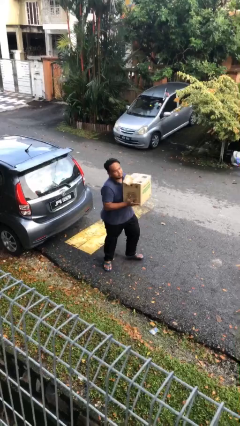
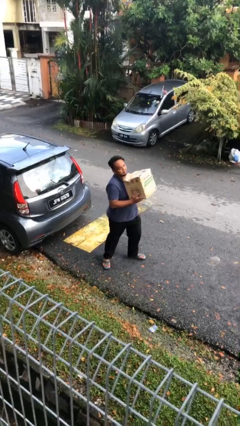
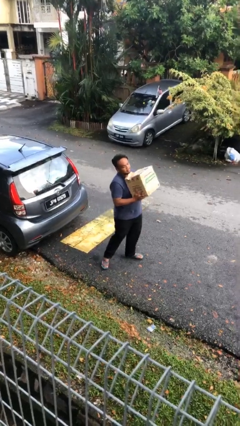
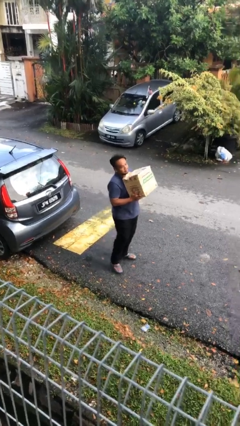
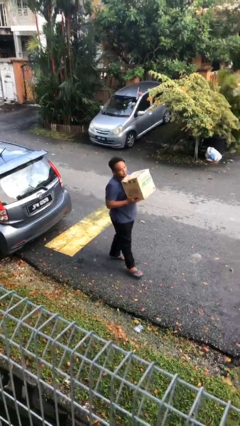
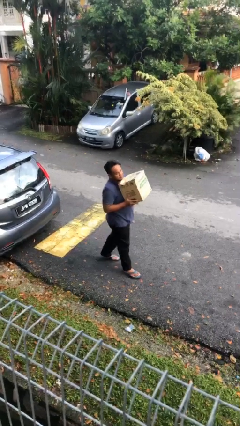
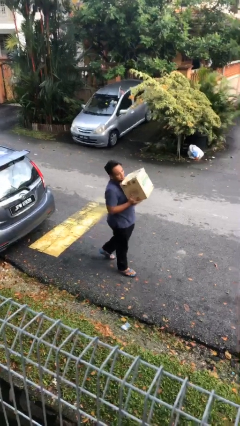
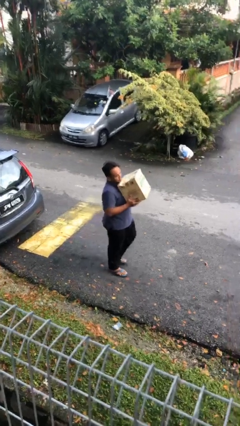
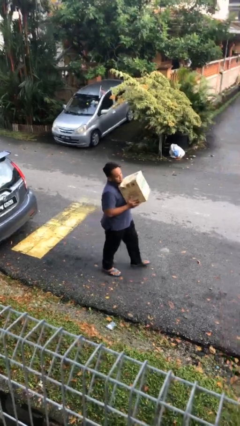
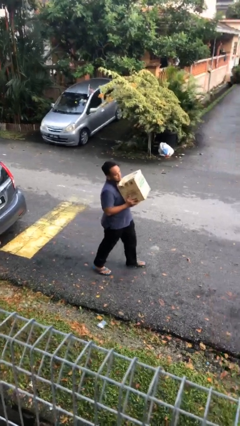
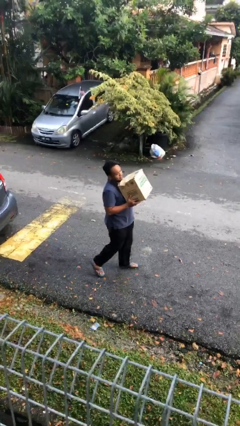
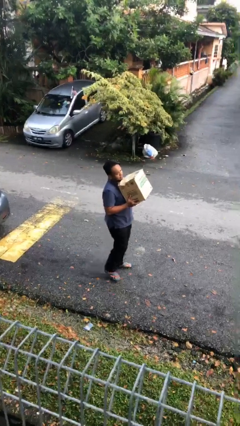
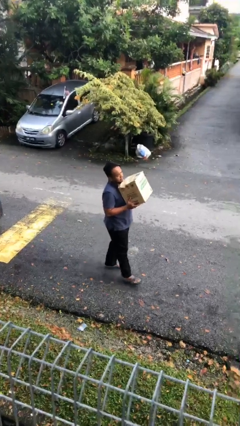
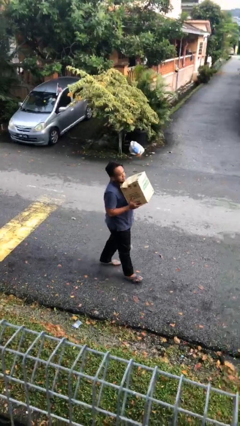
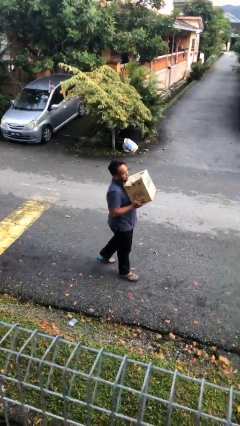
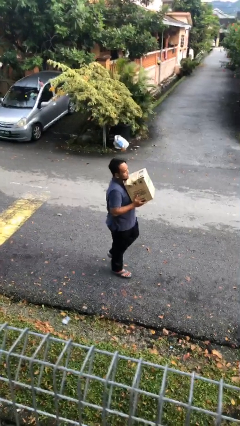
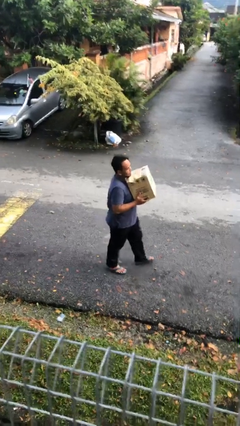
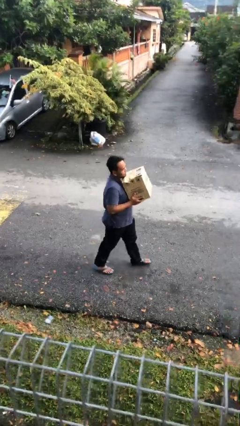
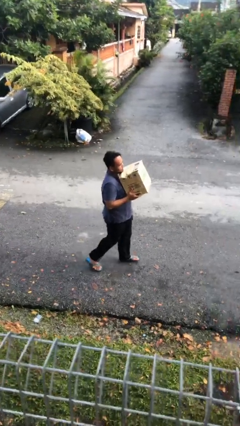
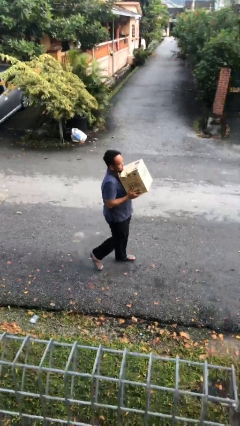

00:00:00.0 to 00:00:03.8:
person carries heavy object

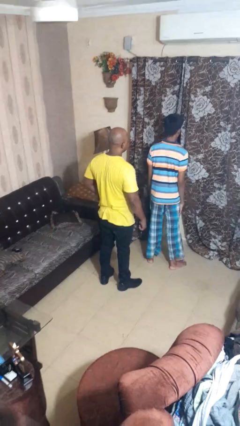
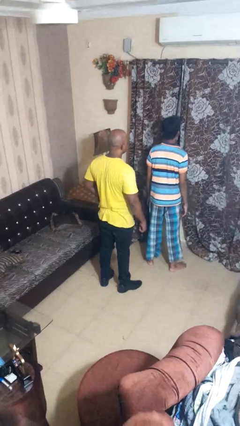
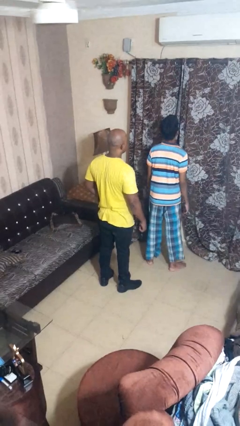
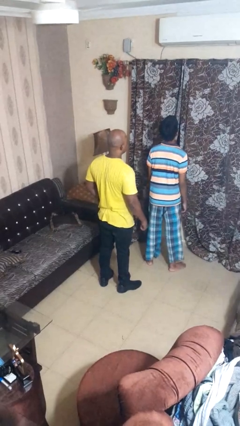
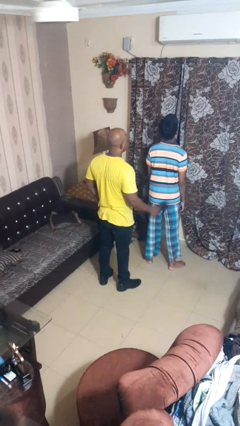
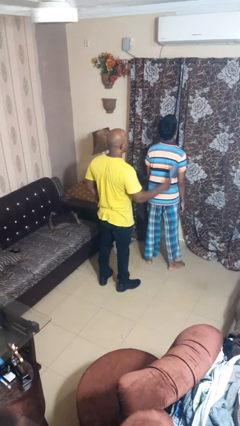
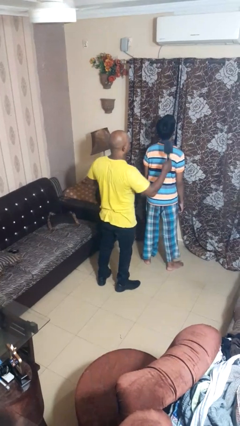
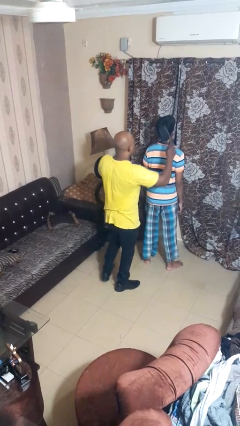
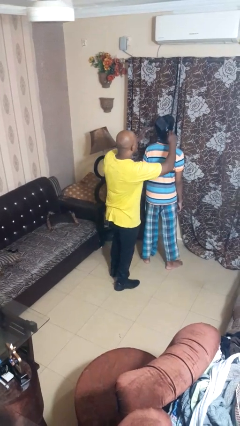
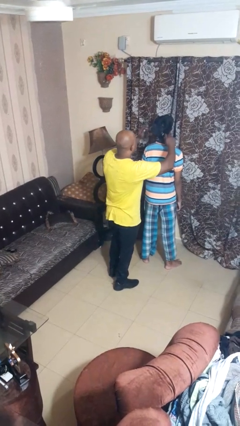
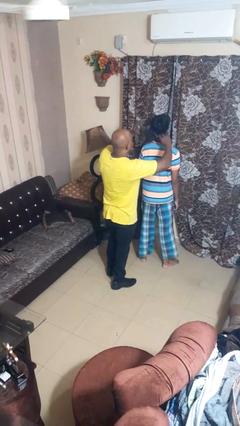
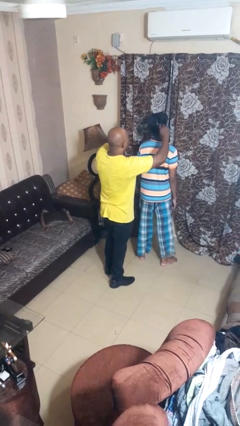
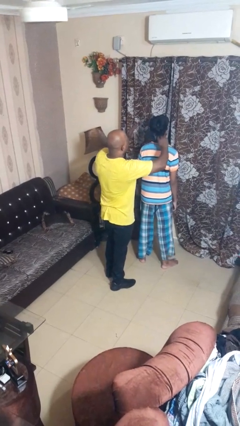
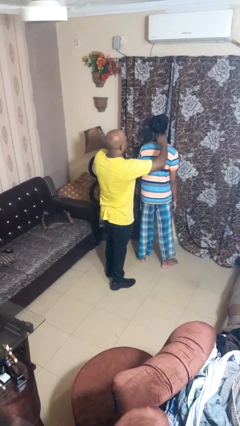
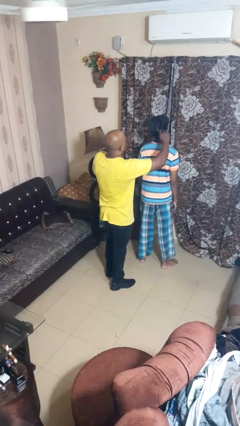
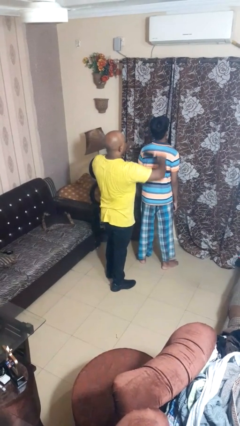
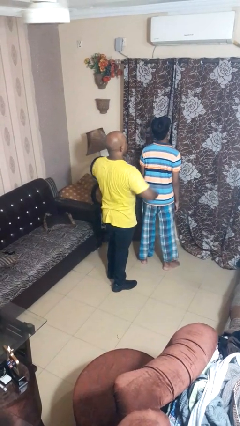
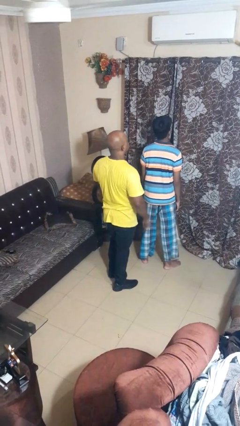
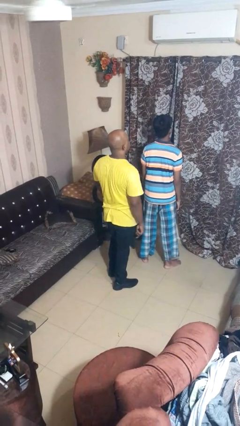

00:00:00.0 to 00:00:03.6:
person brushes hair of person

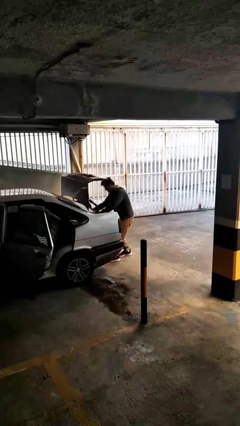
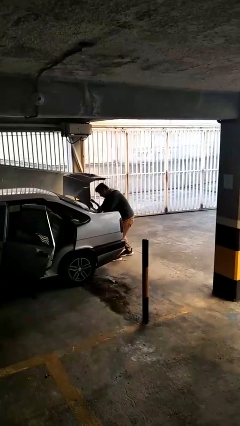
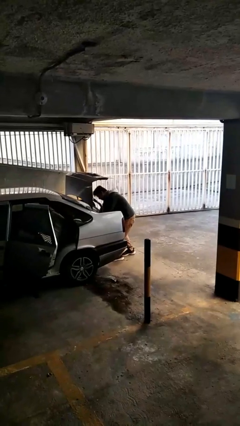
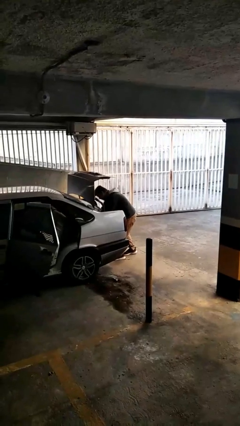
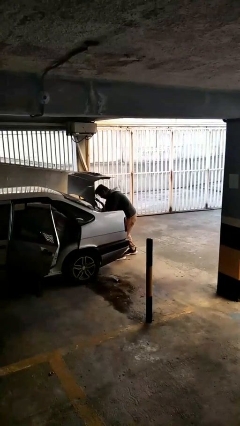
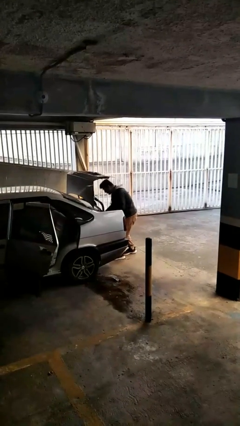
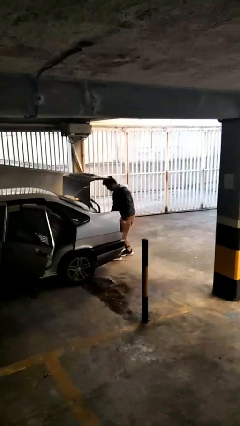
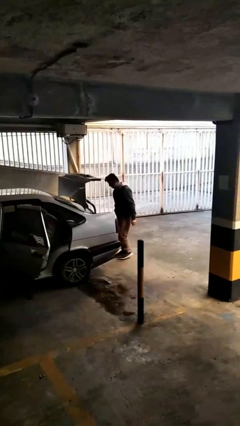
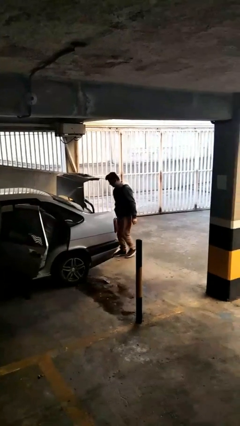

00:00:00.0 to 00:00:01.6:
person loads car

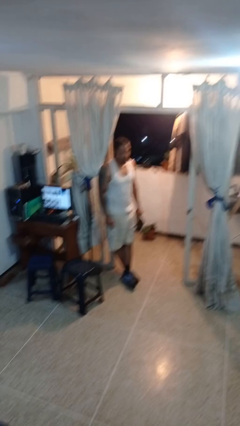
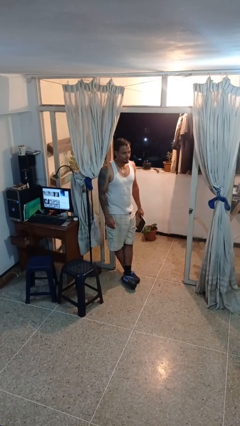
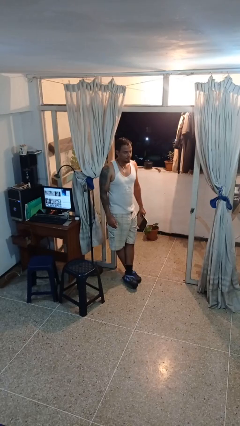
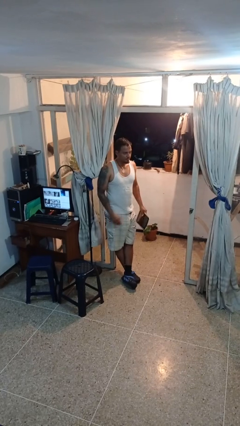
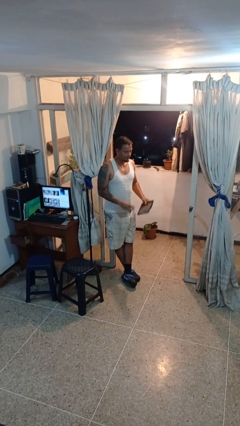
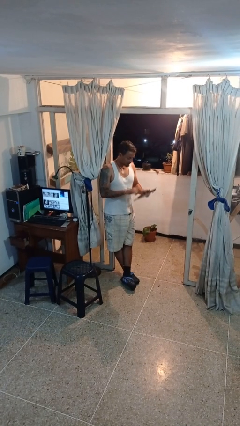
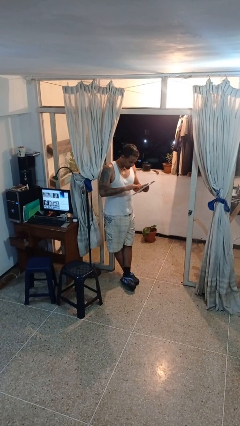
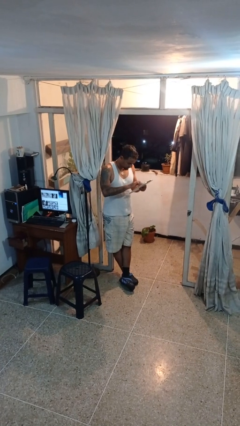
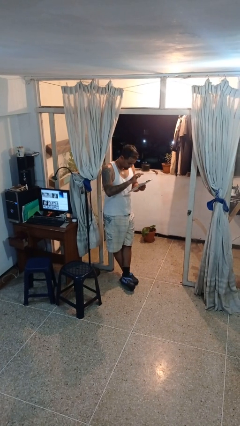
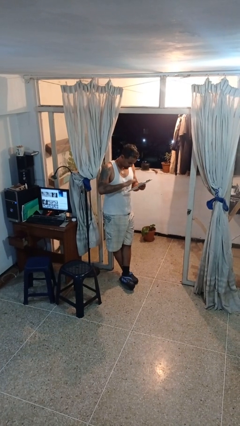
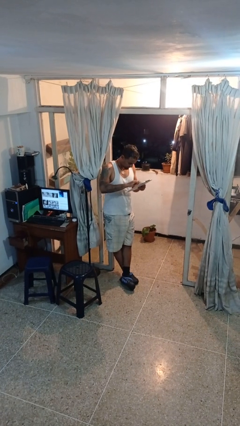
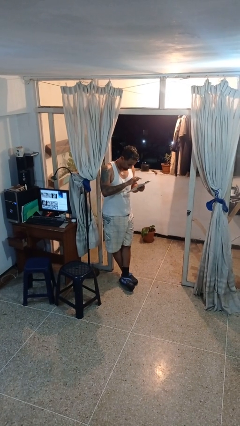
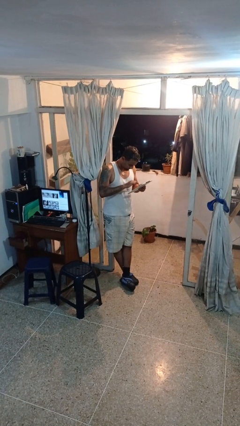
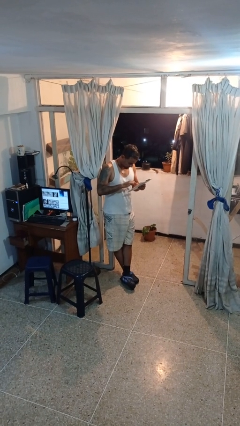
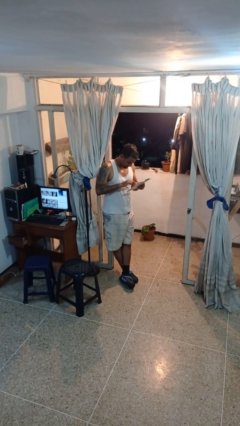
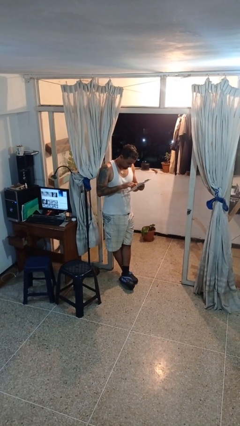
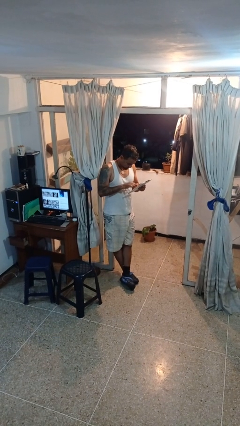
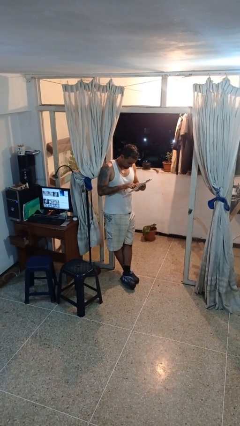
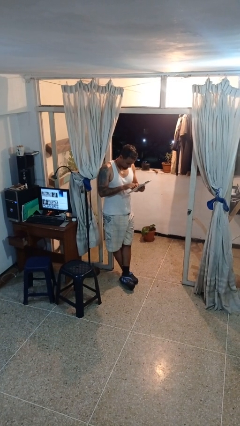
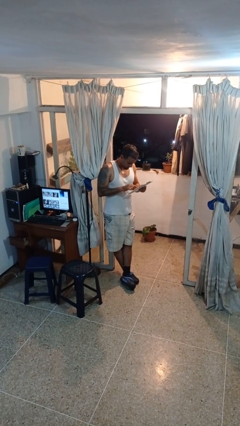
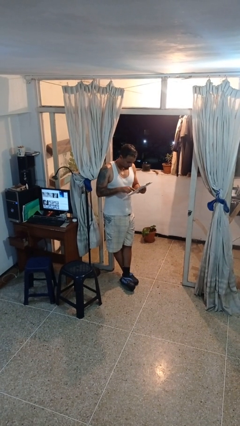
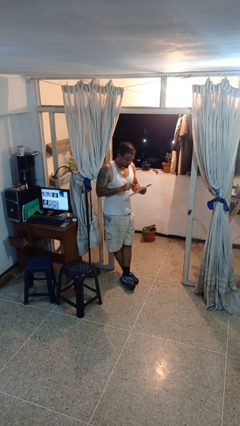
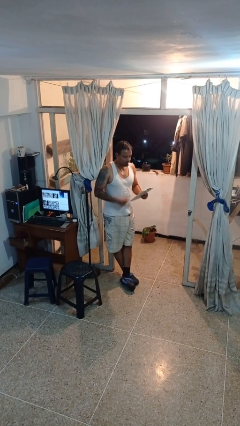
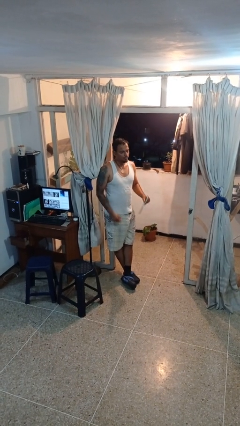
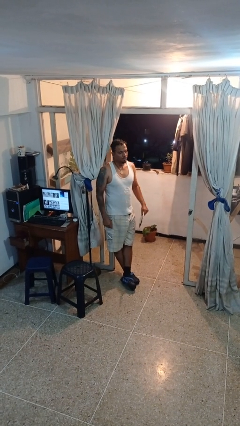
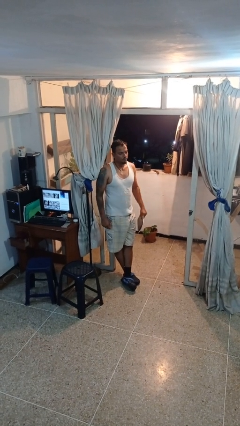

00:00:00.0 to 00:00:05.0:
person interacts with tablet

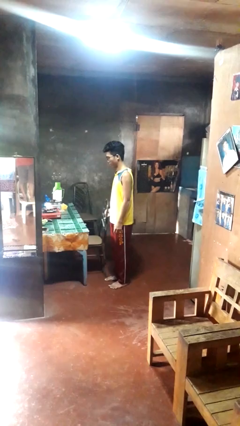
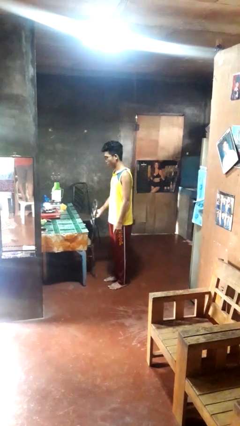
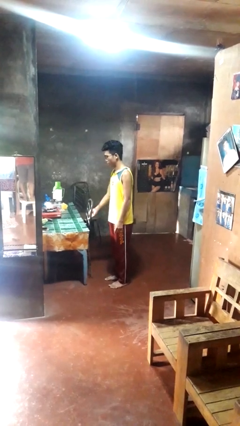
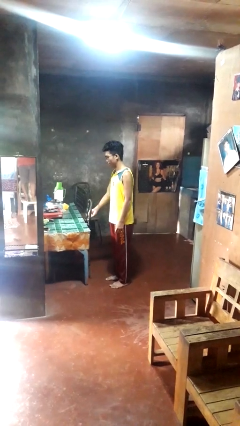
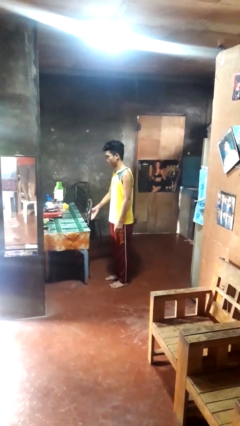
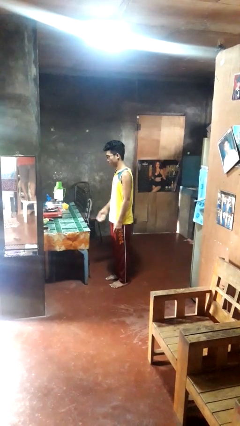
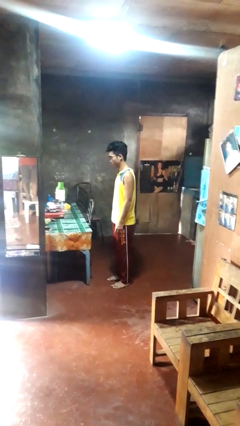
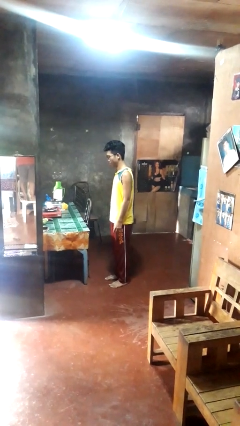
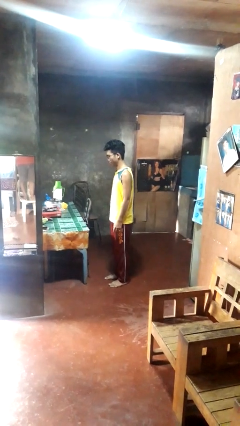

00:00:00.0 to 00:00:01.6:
person pushes in chair

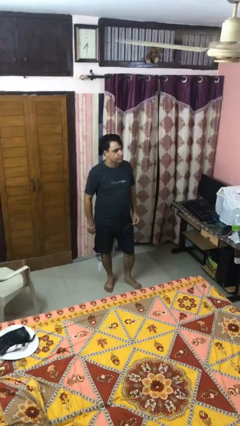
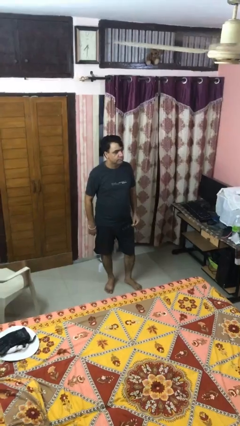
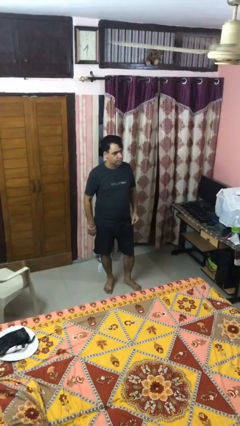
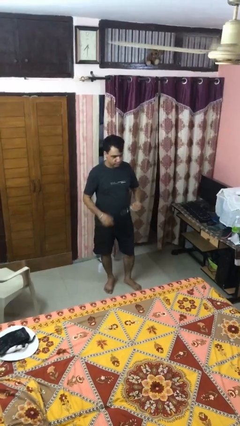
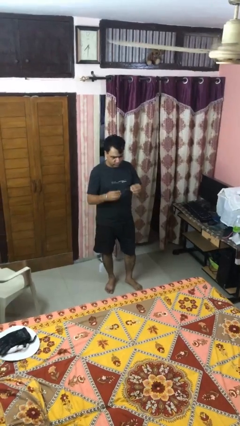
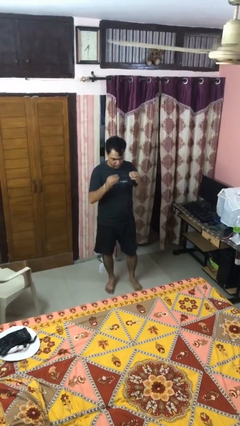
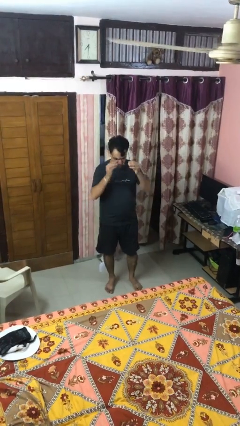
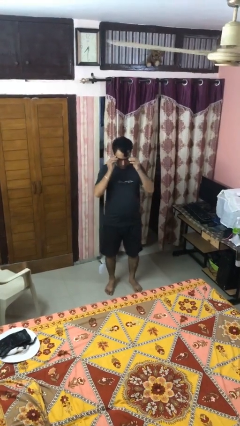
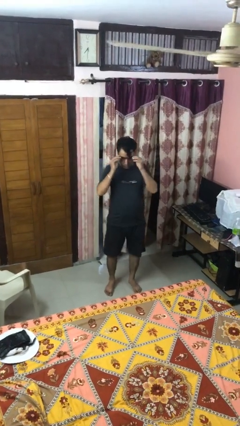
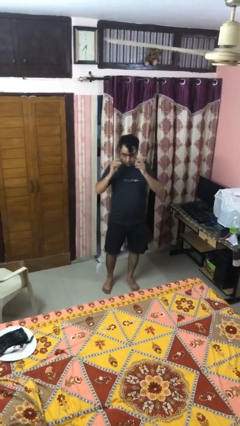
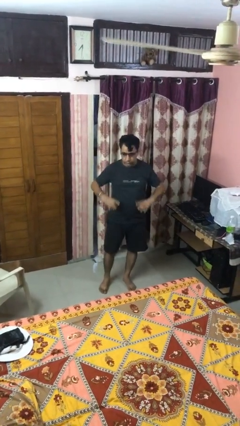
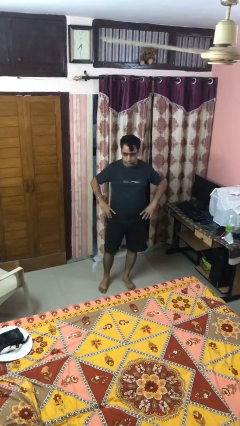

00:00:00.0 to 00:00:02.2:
person puts on glasses
